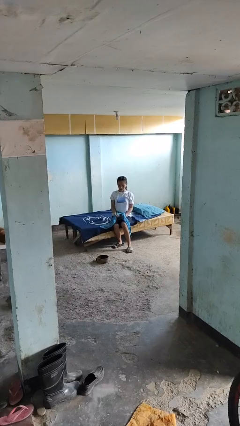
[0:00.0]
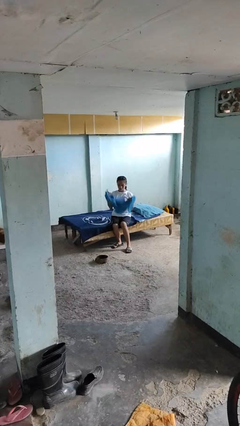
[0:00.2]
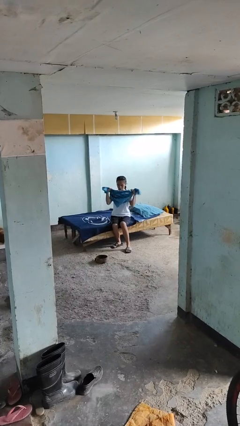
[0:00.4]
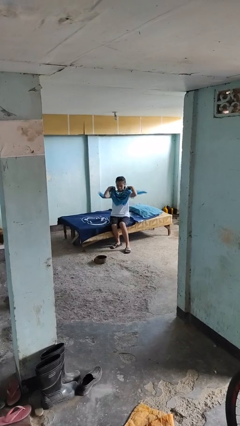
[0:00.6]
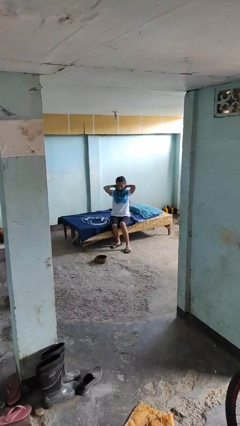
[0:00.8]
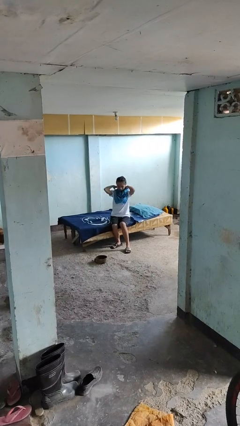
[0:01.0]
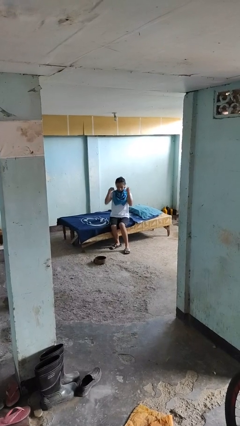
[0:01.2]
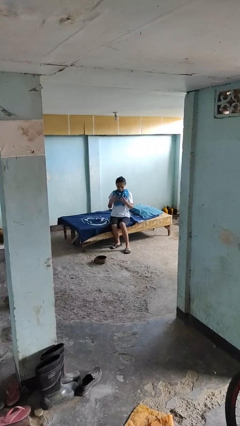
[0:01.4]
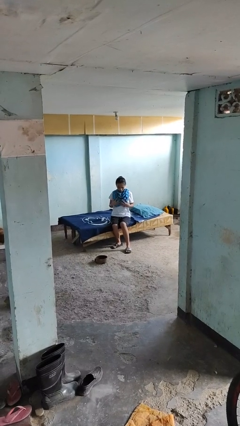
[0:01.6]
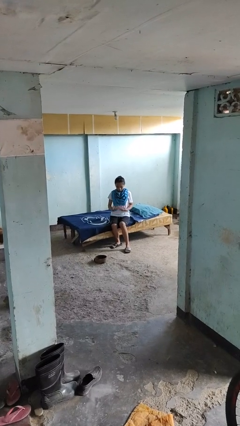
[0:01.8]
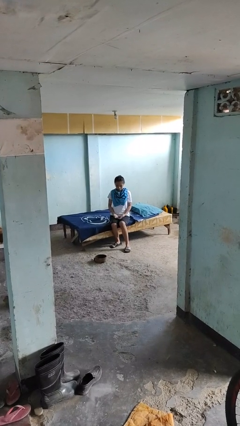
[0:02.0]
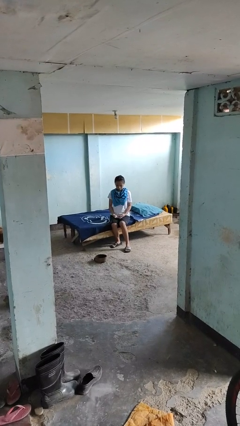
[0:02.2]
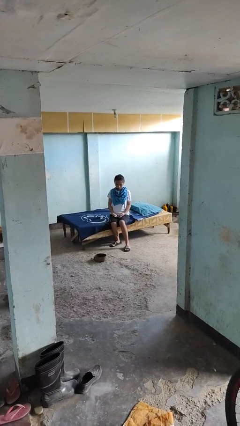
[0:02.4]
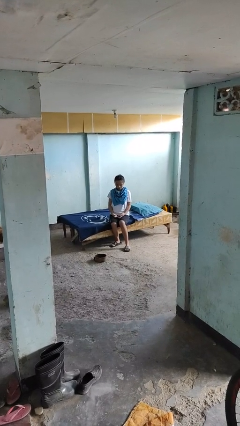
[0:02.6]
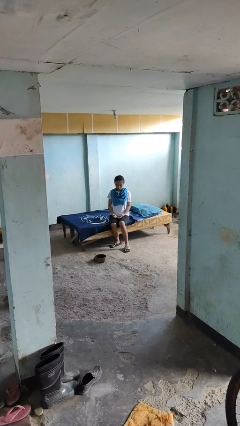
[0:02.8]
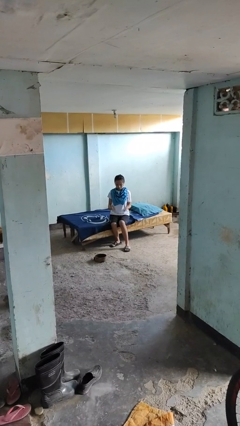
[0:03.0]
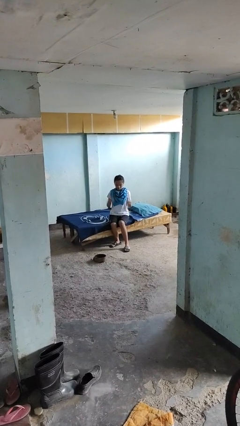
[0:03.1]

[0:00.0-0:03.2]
person puts on scarf

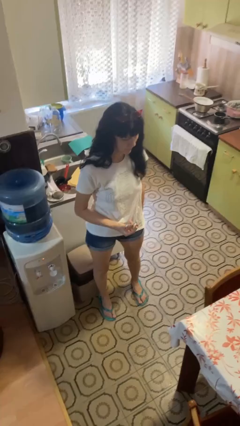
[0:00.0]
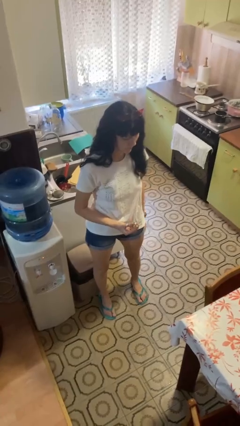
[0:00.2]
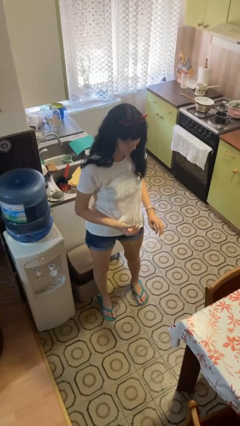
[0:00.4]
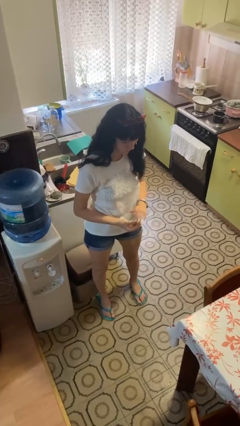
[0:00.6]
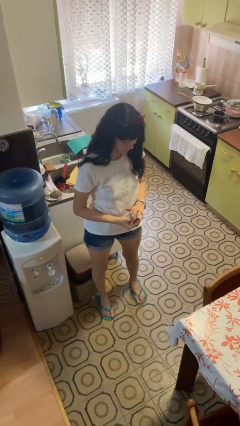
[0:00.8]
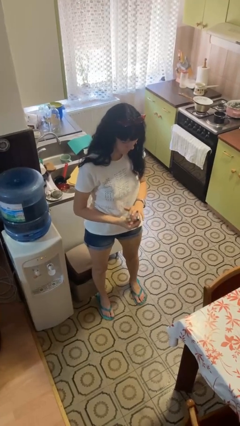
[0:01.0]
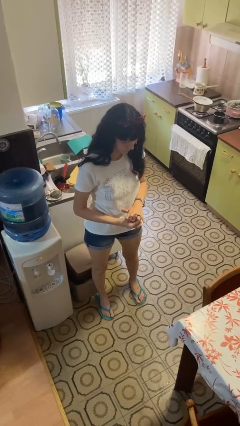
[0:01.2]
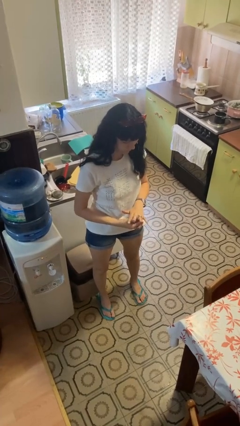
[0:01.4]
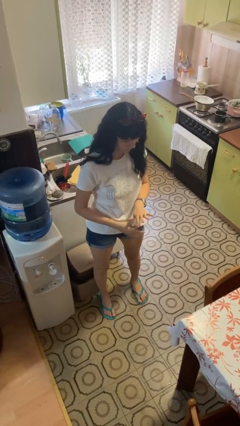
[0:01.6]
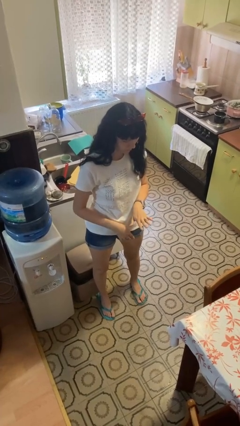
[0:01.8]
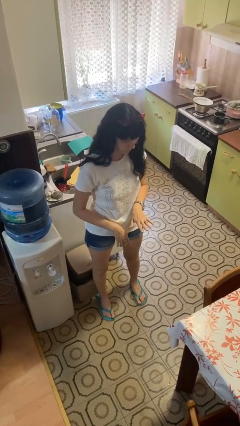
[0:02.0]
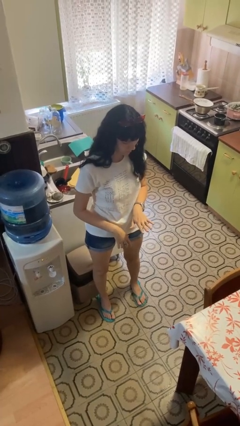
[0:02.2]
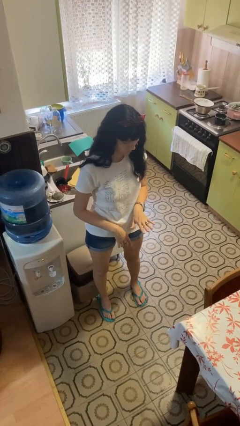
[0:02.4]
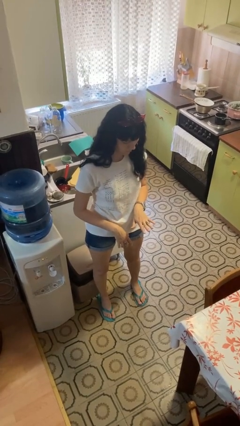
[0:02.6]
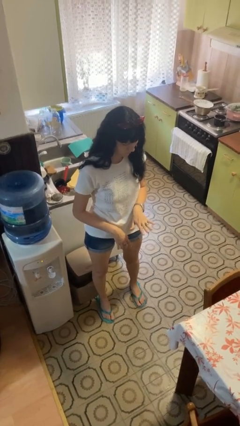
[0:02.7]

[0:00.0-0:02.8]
person puts on ring

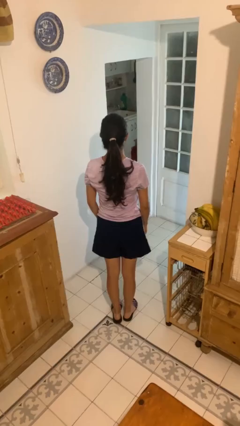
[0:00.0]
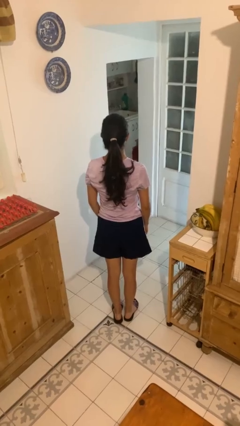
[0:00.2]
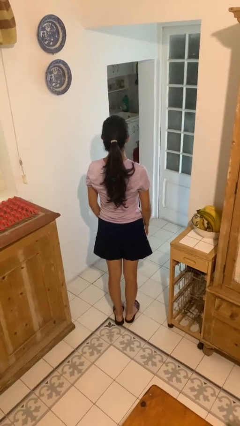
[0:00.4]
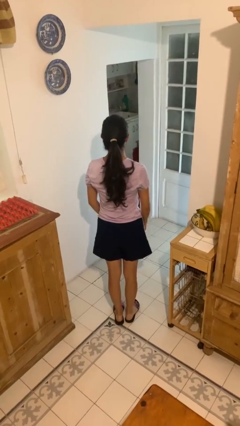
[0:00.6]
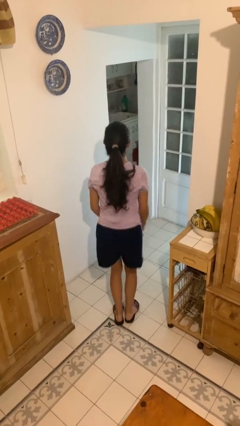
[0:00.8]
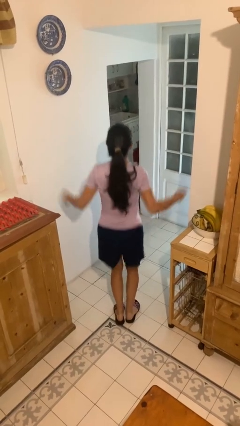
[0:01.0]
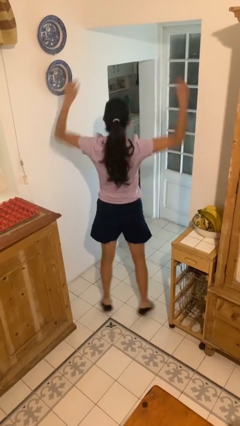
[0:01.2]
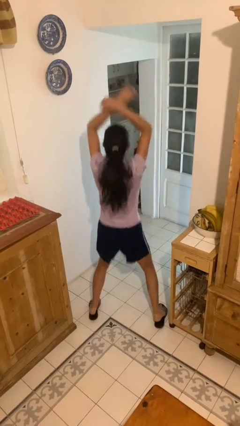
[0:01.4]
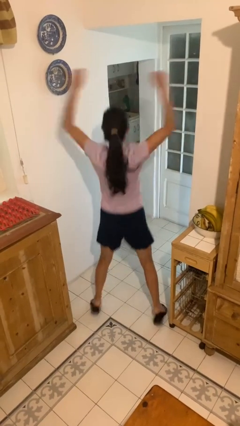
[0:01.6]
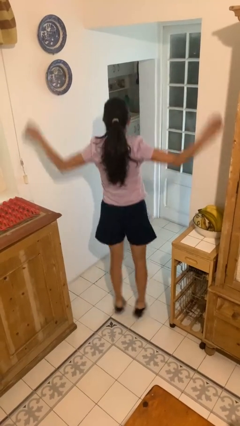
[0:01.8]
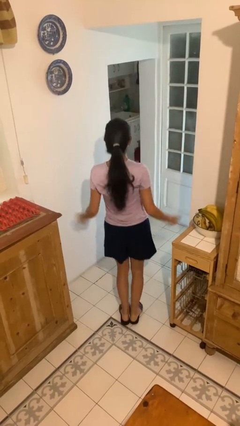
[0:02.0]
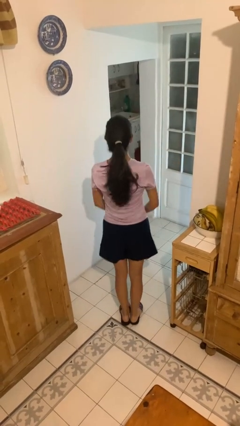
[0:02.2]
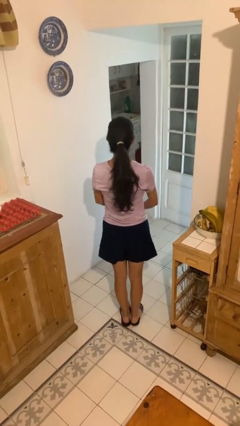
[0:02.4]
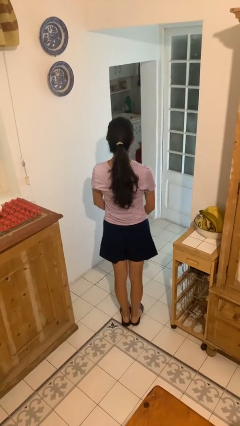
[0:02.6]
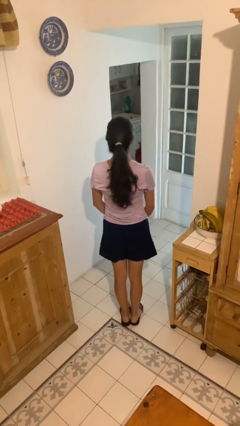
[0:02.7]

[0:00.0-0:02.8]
person exercises with jumping jacks

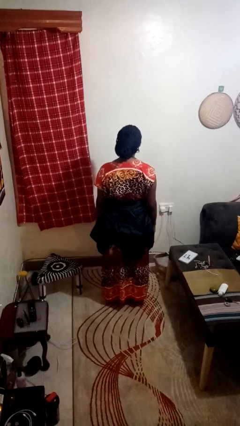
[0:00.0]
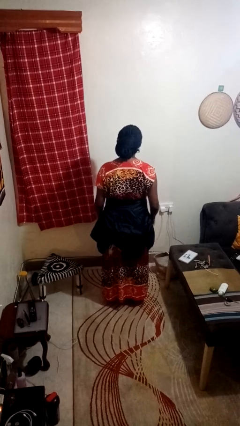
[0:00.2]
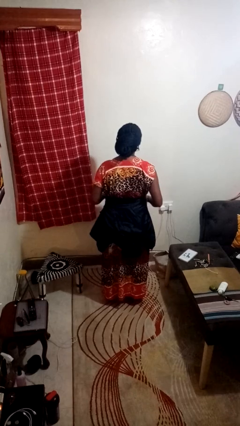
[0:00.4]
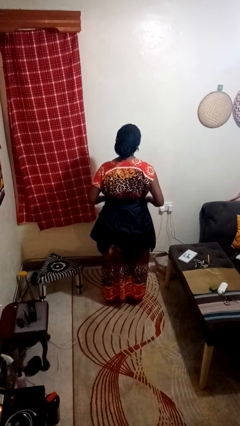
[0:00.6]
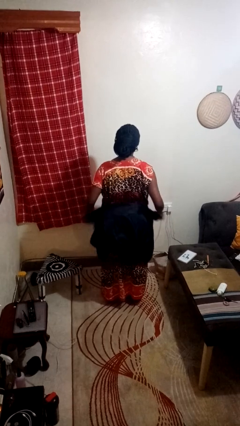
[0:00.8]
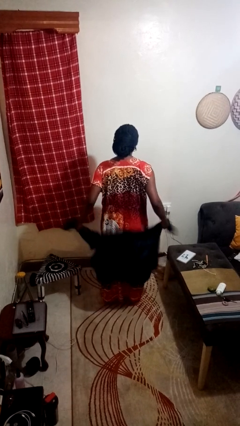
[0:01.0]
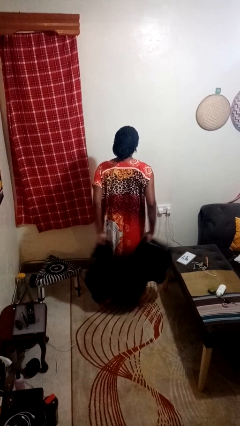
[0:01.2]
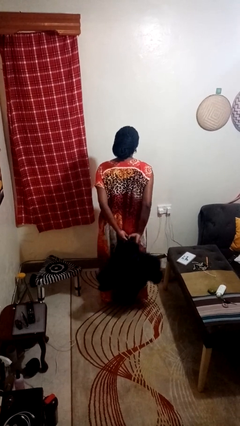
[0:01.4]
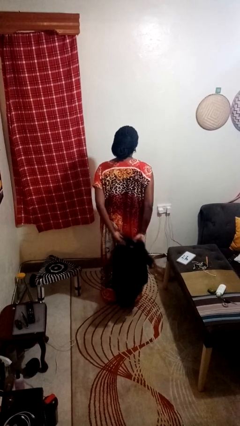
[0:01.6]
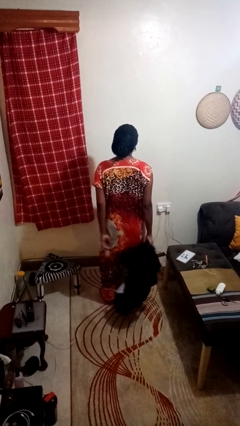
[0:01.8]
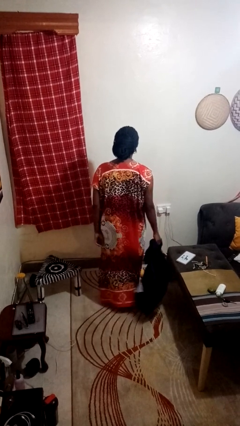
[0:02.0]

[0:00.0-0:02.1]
person unties jacket around waist

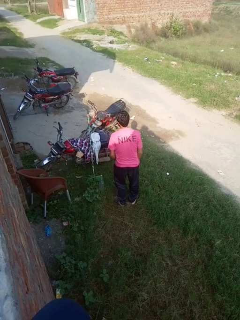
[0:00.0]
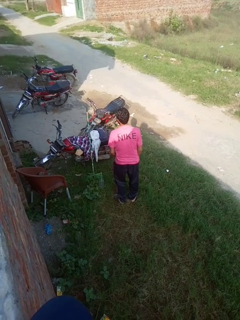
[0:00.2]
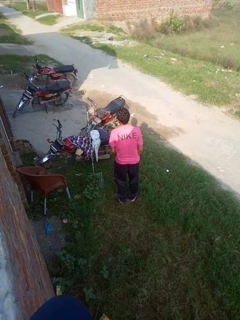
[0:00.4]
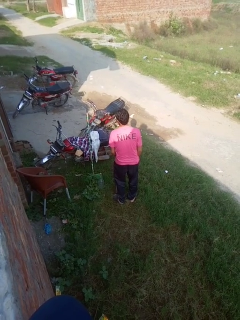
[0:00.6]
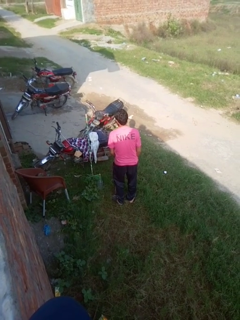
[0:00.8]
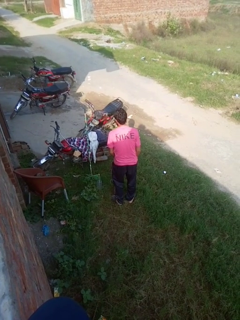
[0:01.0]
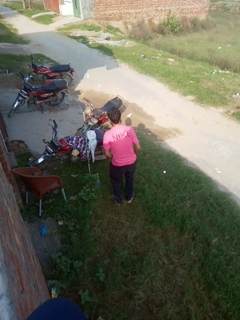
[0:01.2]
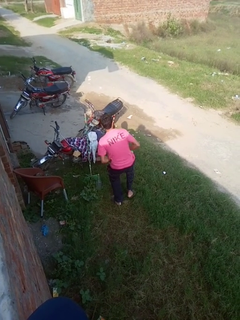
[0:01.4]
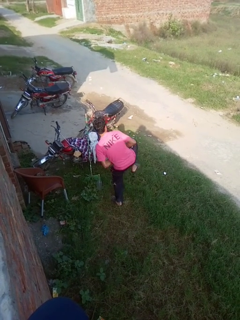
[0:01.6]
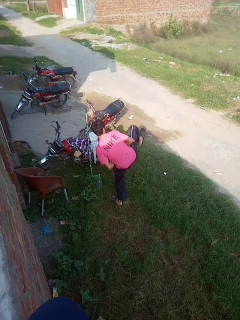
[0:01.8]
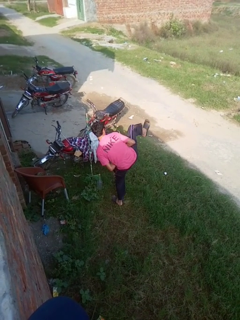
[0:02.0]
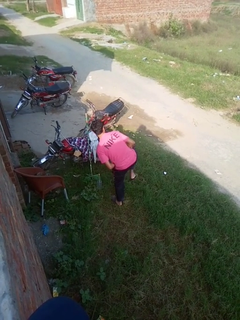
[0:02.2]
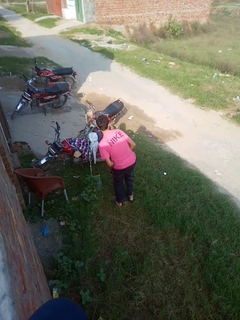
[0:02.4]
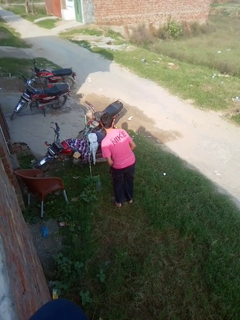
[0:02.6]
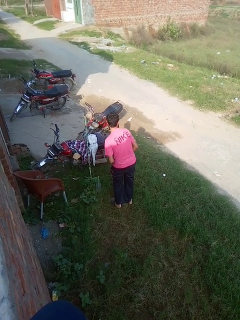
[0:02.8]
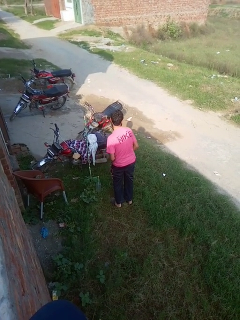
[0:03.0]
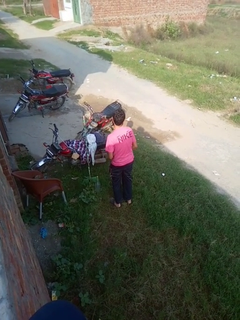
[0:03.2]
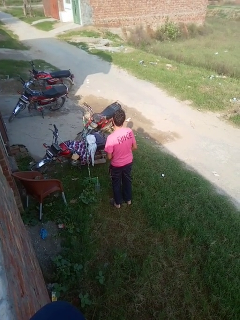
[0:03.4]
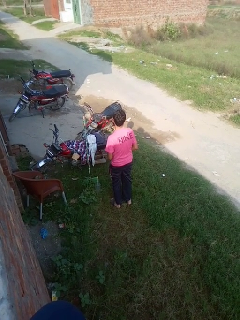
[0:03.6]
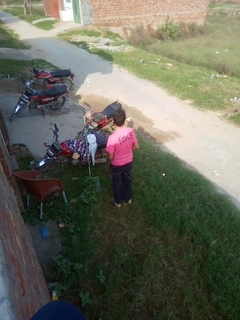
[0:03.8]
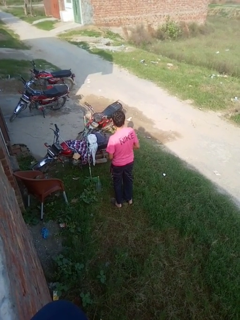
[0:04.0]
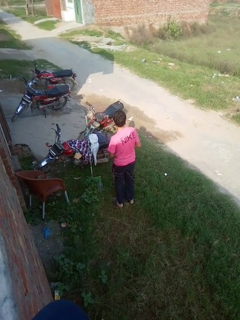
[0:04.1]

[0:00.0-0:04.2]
person karate kicks

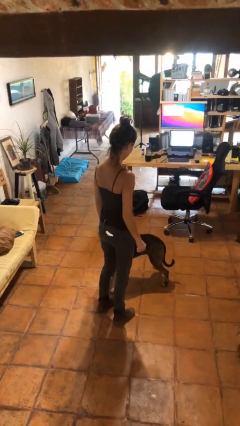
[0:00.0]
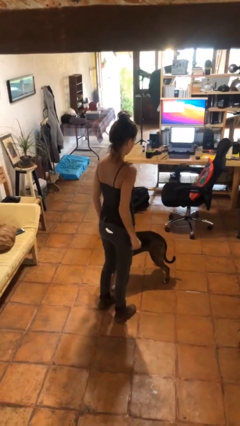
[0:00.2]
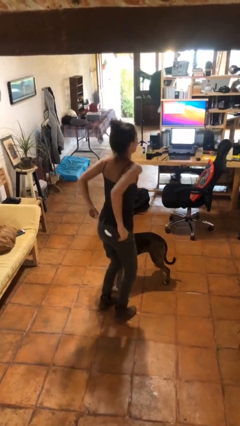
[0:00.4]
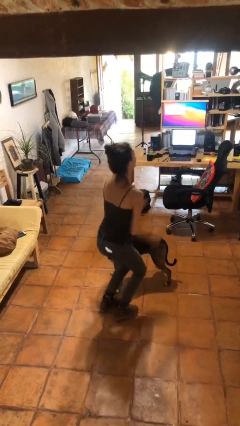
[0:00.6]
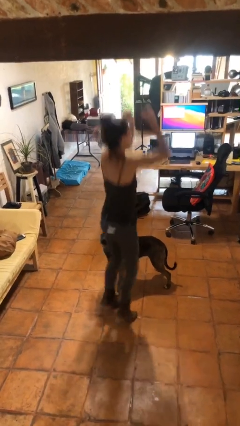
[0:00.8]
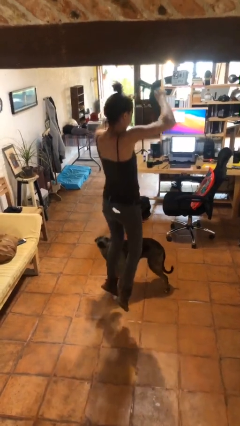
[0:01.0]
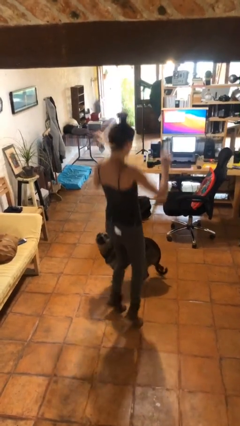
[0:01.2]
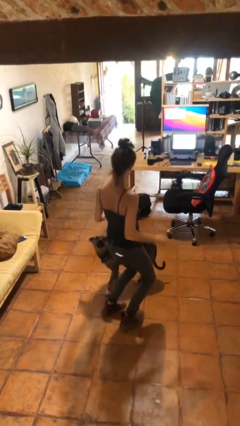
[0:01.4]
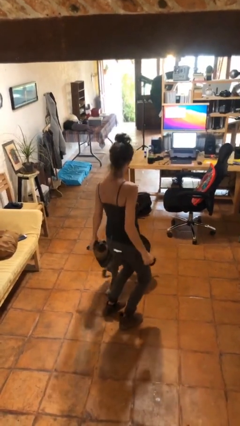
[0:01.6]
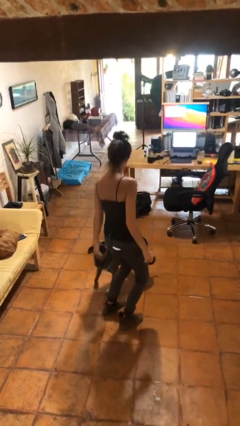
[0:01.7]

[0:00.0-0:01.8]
person jumps

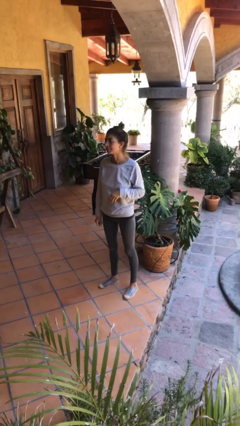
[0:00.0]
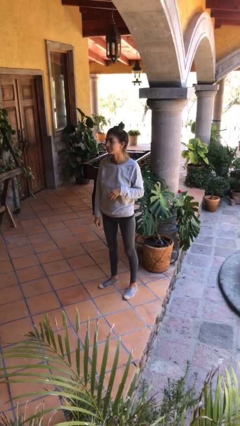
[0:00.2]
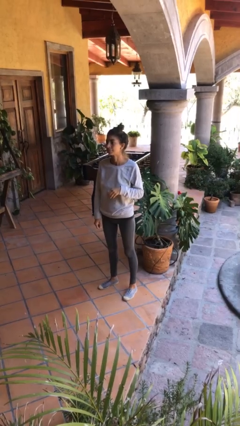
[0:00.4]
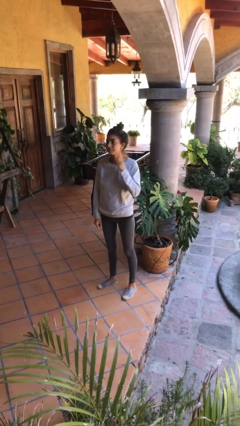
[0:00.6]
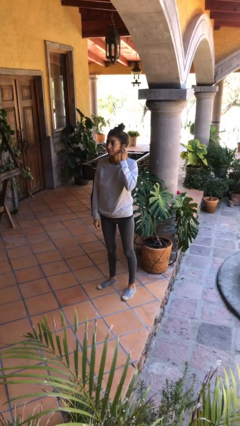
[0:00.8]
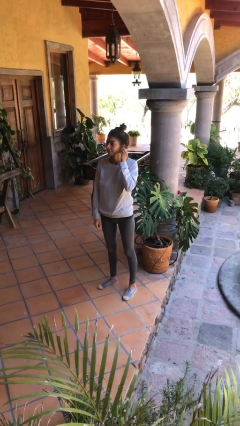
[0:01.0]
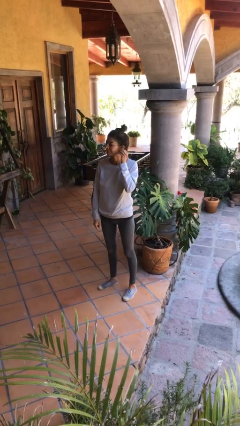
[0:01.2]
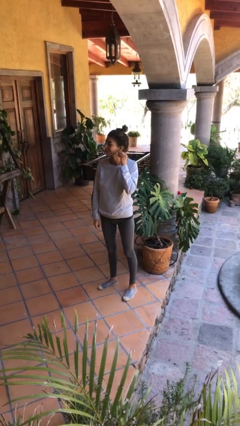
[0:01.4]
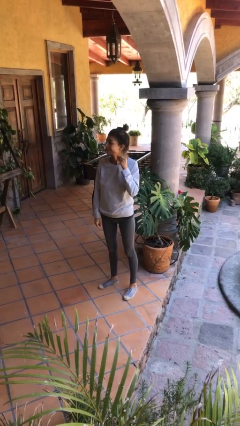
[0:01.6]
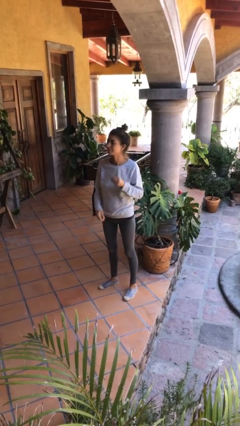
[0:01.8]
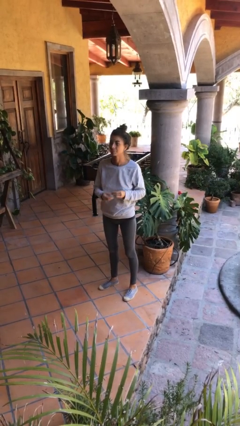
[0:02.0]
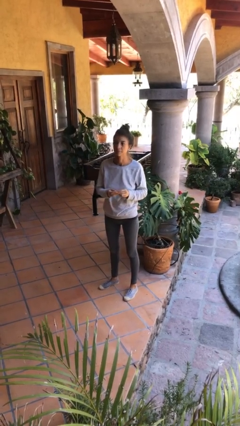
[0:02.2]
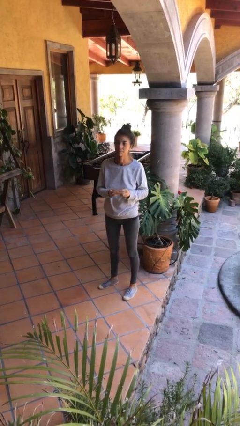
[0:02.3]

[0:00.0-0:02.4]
person takes off earrings
